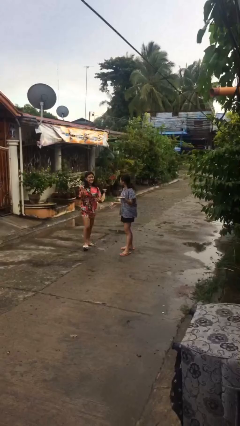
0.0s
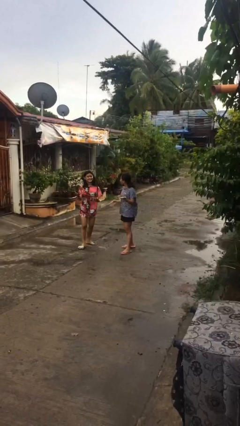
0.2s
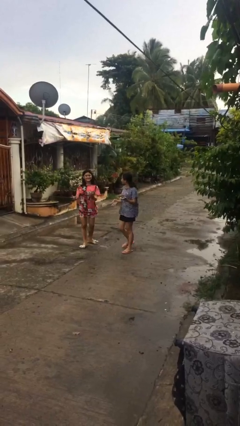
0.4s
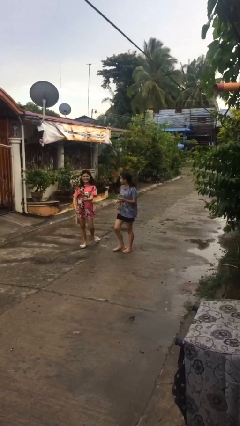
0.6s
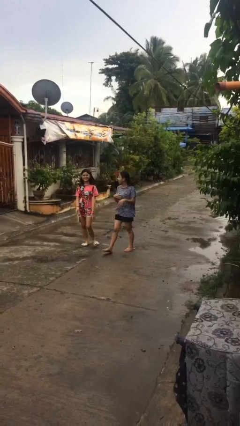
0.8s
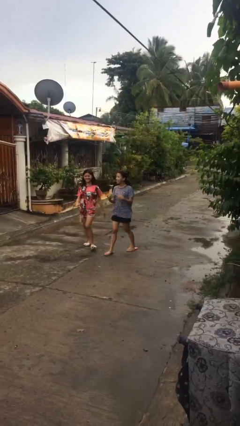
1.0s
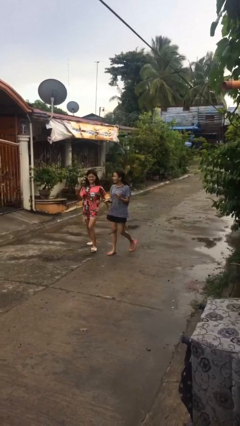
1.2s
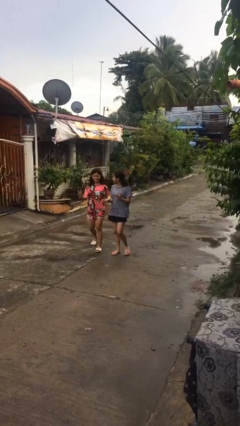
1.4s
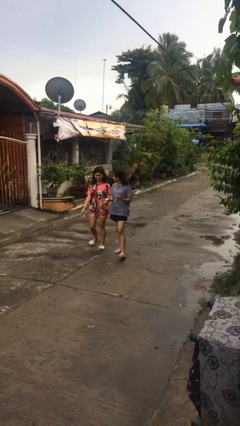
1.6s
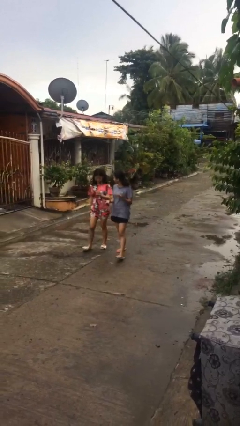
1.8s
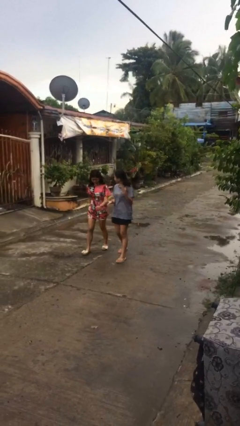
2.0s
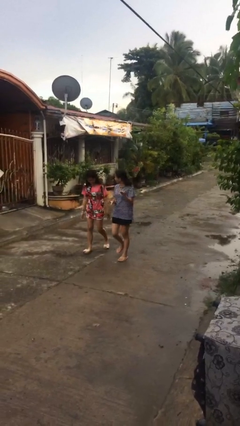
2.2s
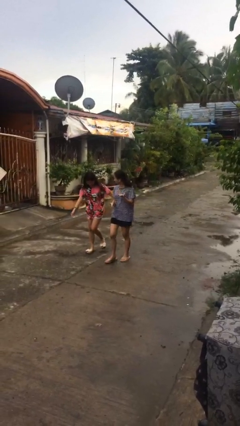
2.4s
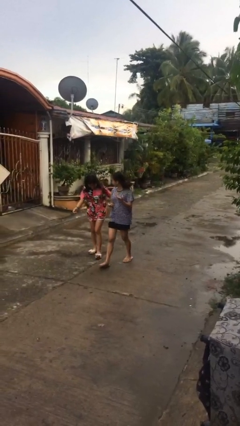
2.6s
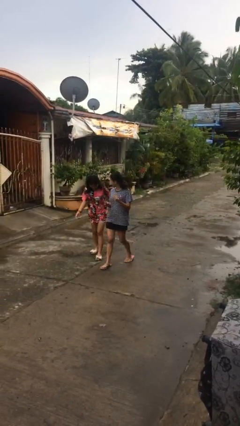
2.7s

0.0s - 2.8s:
person talks to person

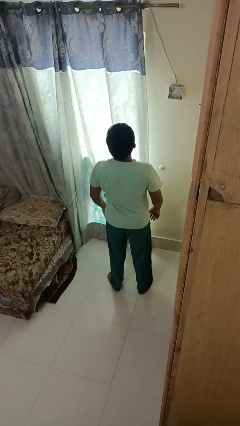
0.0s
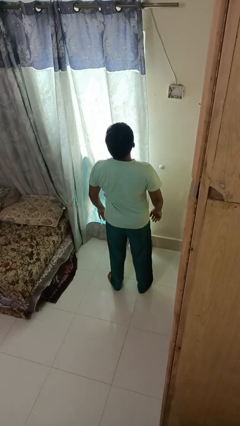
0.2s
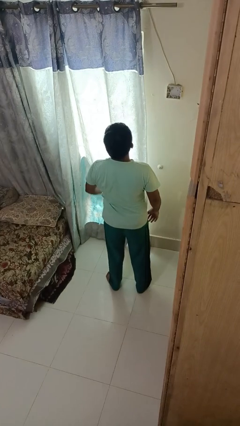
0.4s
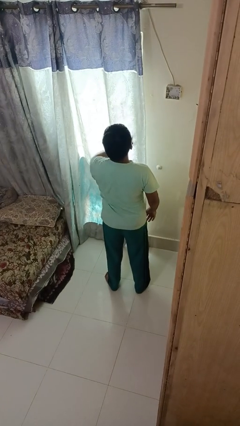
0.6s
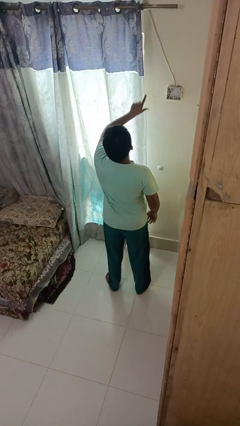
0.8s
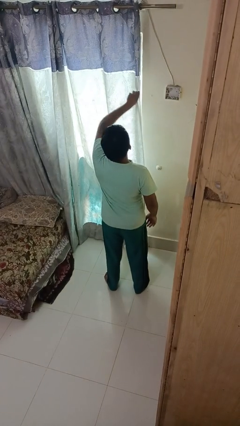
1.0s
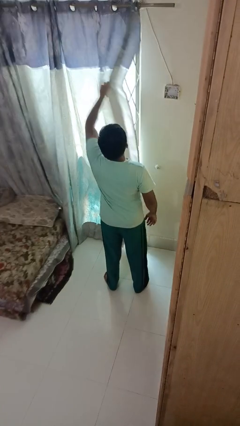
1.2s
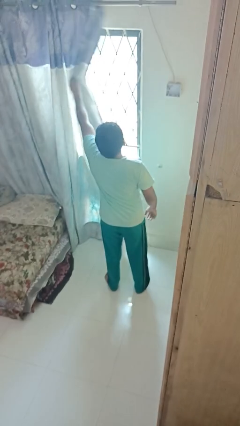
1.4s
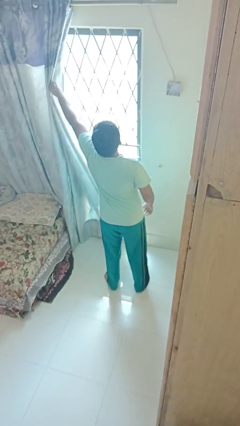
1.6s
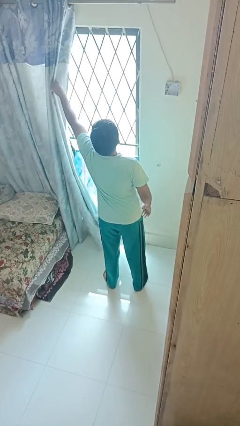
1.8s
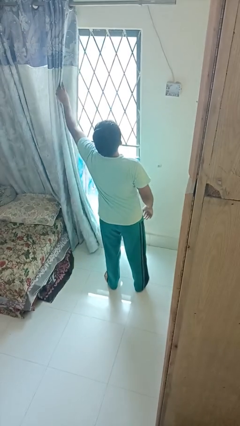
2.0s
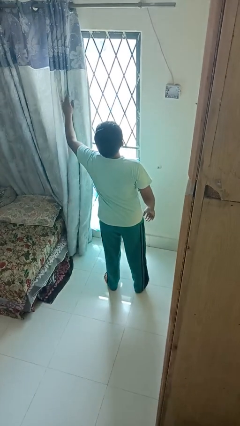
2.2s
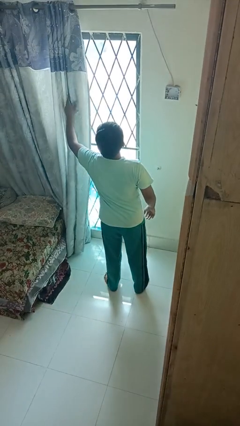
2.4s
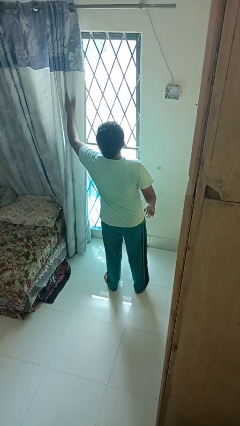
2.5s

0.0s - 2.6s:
person opens curtains

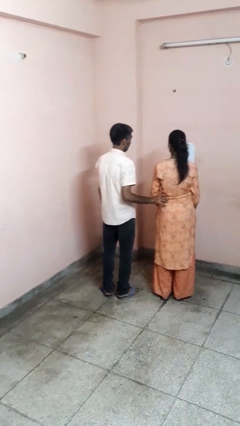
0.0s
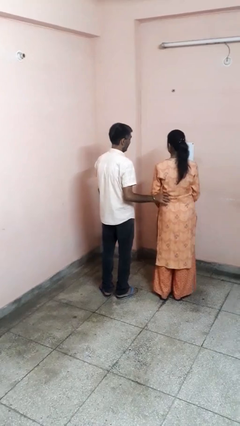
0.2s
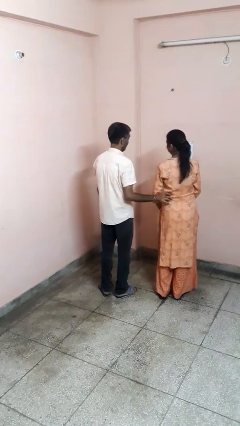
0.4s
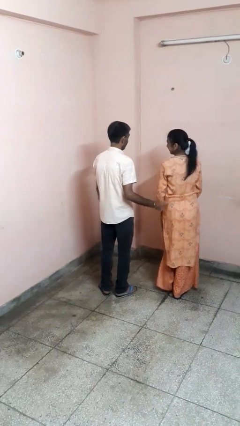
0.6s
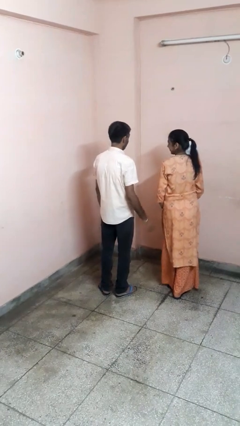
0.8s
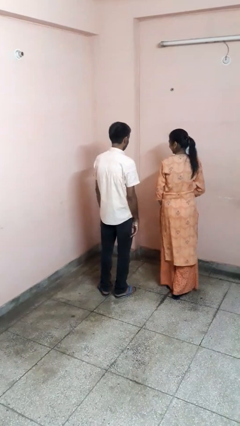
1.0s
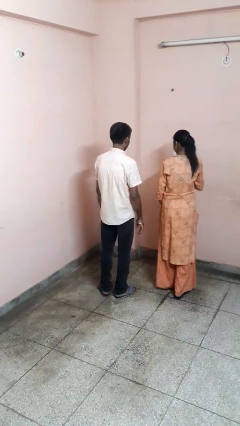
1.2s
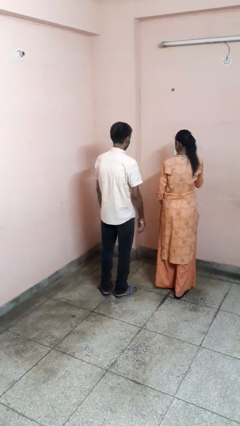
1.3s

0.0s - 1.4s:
person tickles person

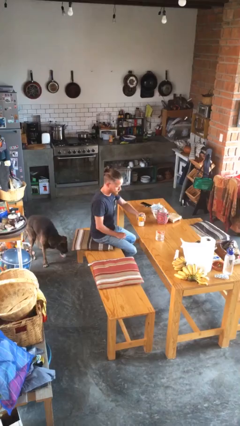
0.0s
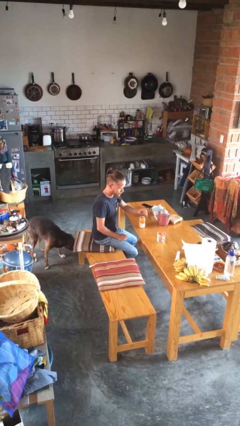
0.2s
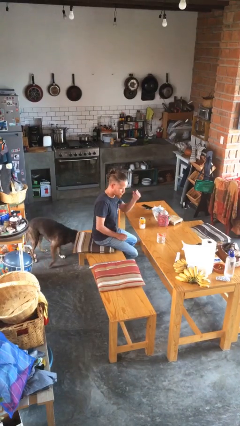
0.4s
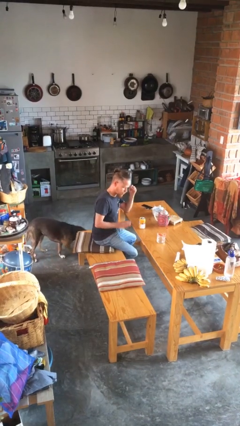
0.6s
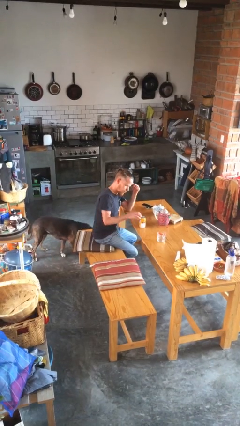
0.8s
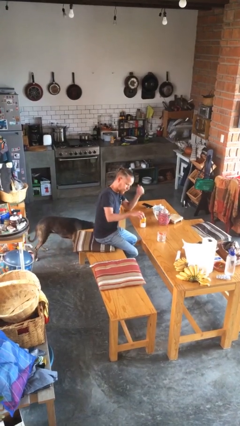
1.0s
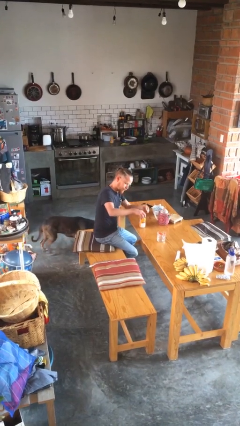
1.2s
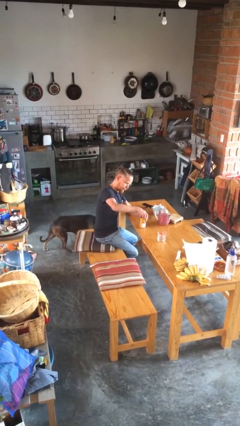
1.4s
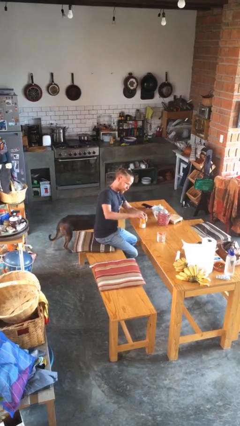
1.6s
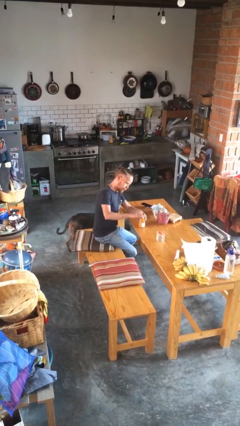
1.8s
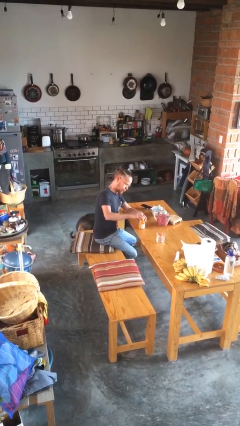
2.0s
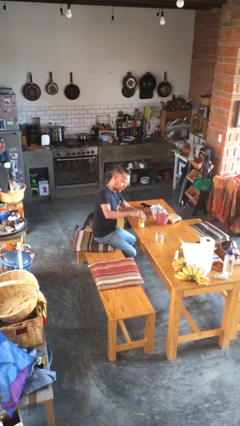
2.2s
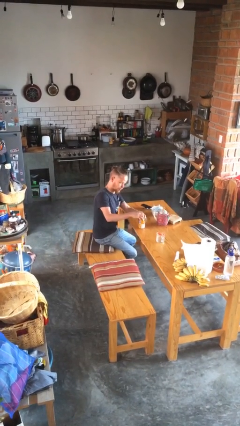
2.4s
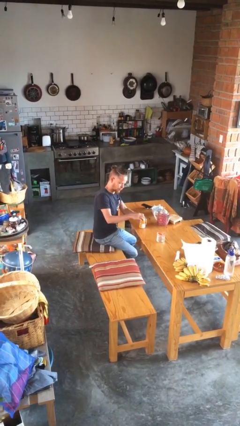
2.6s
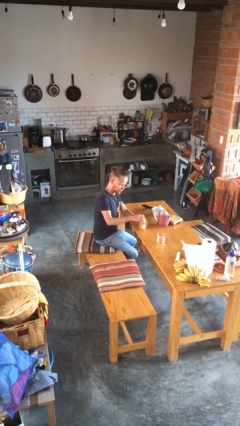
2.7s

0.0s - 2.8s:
person opens beverage can

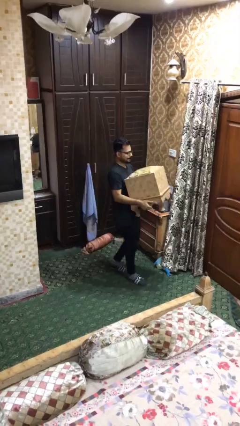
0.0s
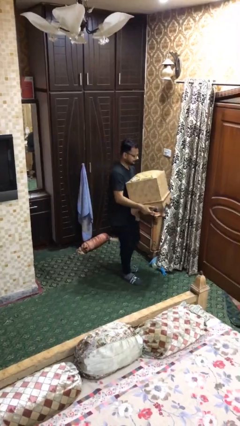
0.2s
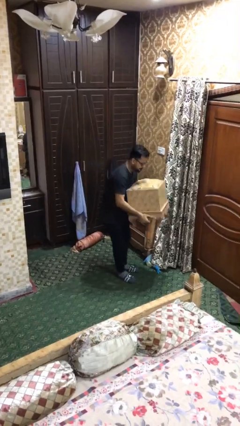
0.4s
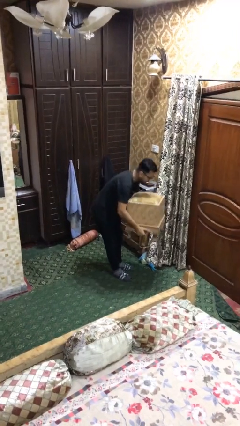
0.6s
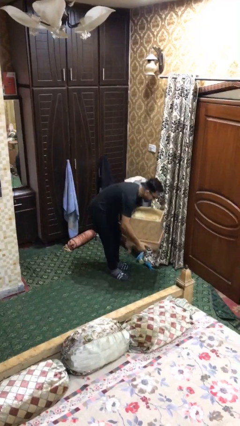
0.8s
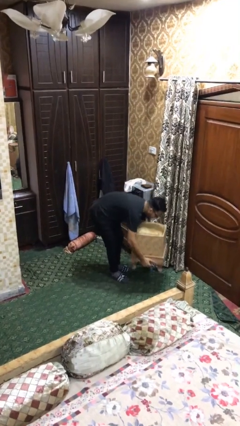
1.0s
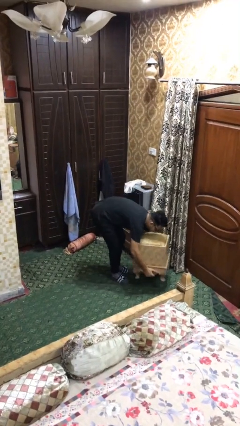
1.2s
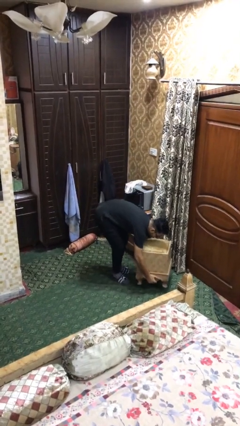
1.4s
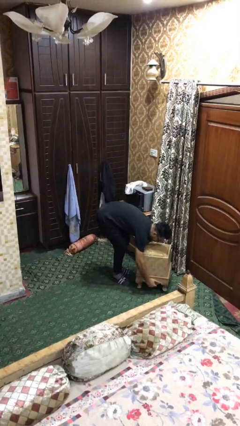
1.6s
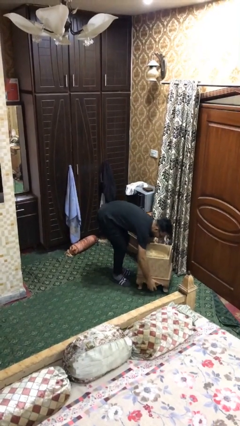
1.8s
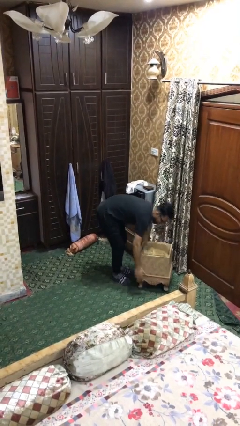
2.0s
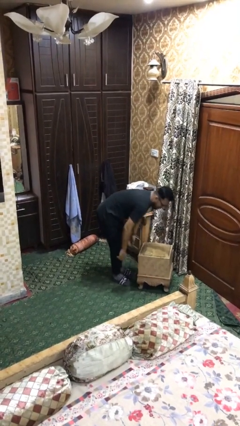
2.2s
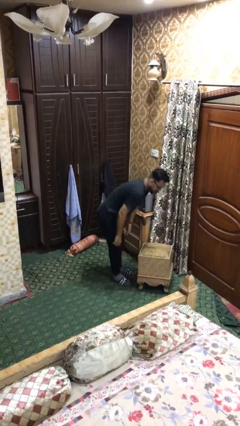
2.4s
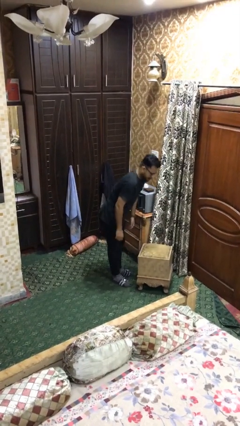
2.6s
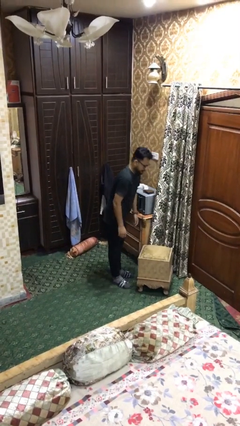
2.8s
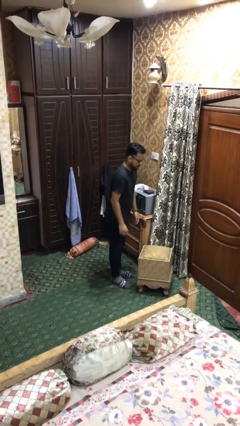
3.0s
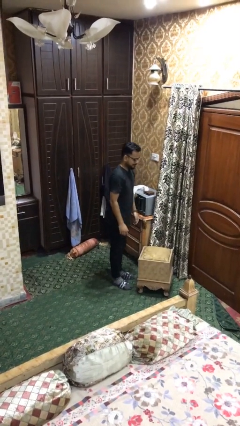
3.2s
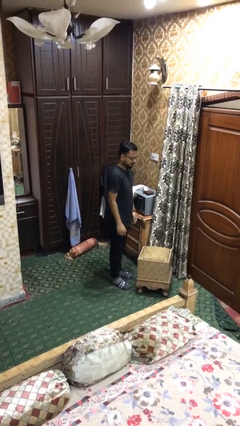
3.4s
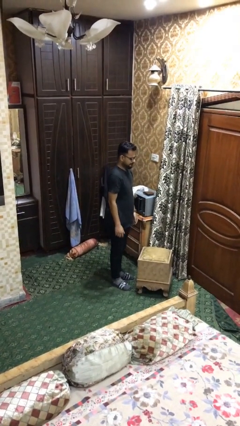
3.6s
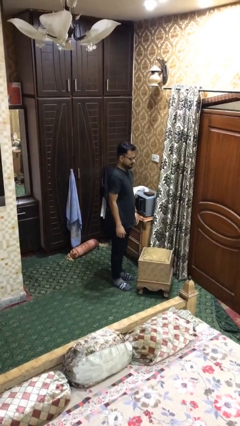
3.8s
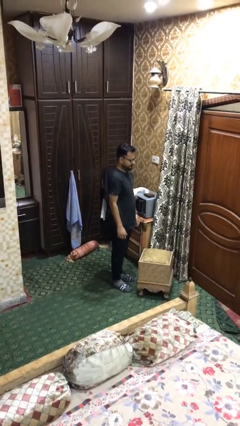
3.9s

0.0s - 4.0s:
person puts down object on floor

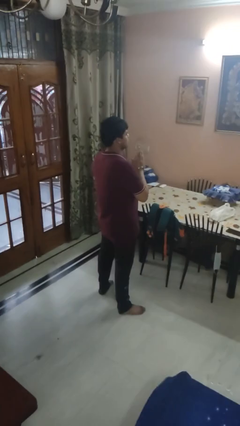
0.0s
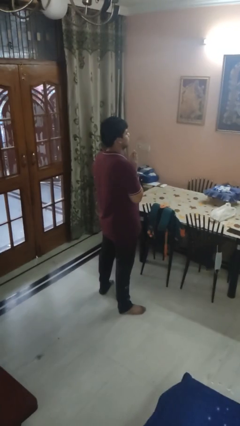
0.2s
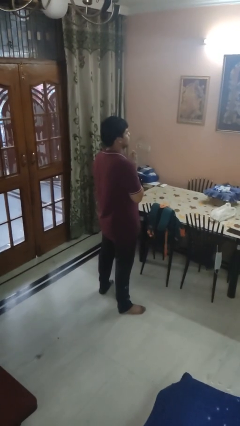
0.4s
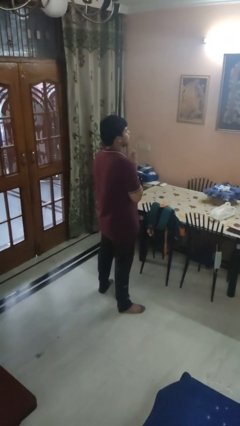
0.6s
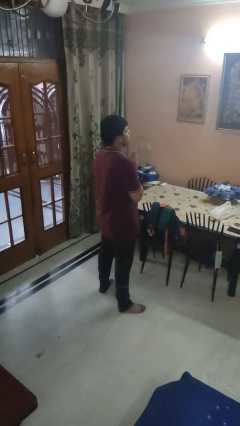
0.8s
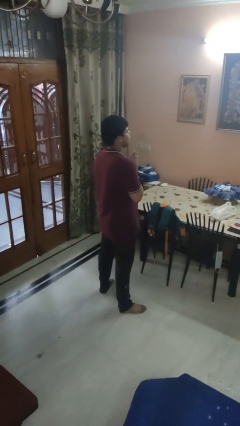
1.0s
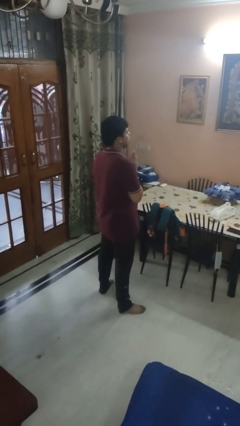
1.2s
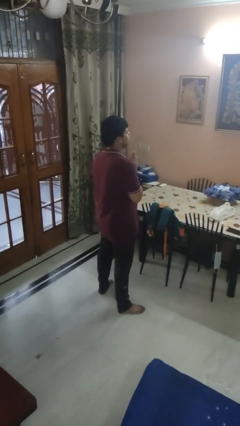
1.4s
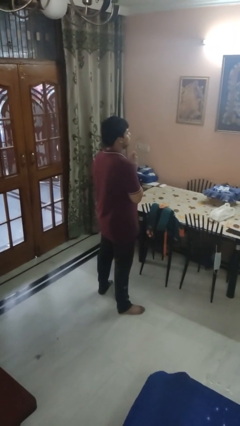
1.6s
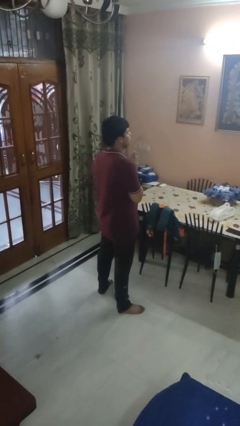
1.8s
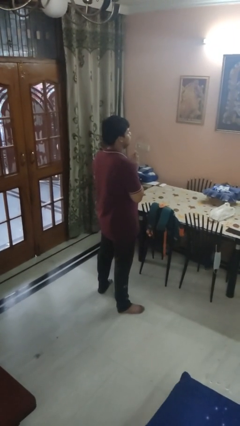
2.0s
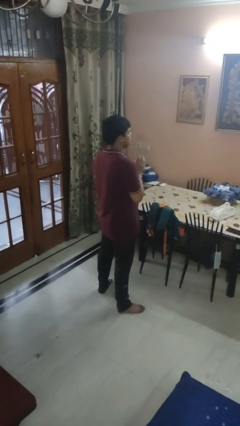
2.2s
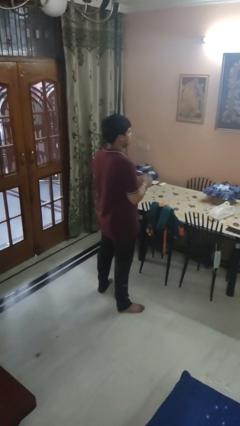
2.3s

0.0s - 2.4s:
person prays

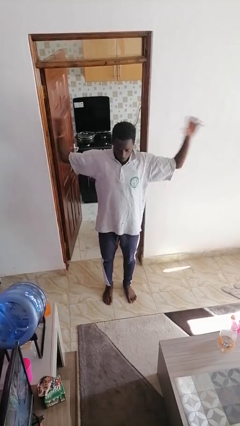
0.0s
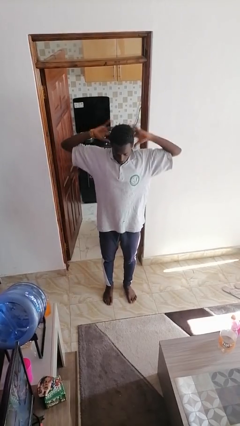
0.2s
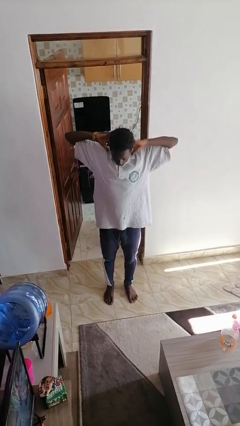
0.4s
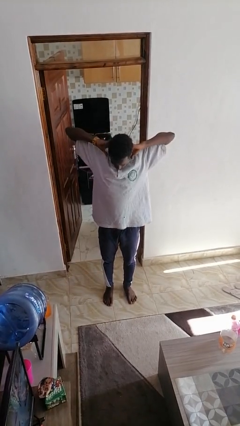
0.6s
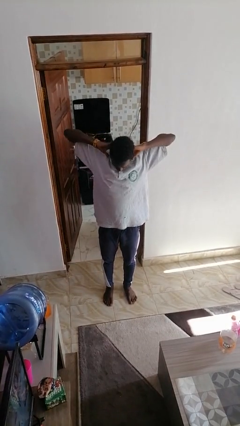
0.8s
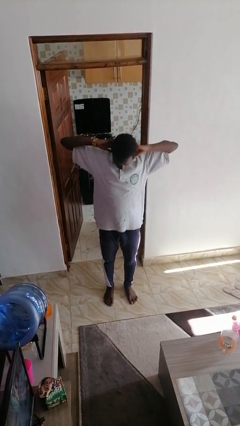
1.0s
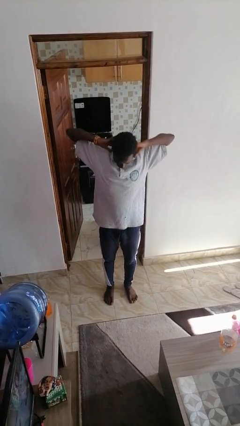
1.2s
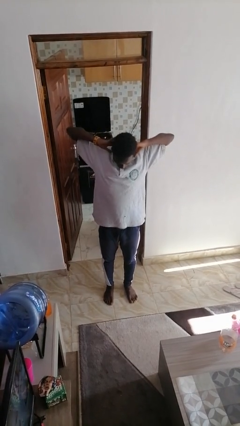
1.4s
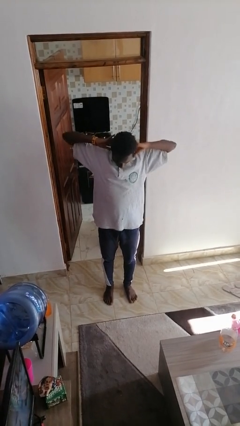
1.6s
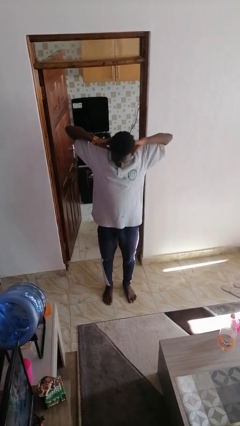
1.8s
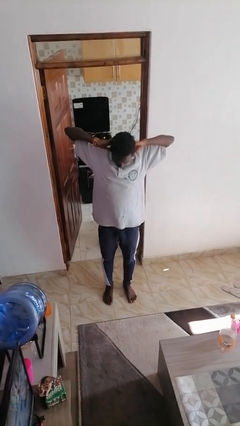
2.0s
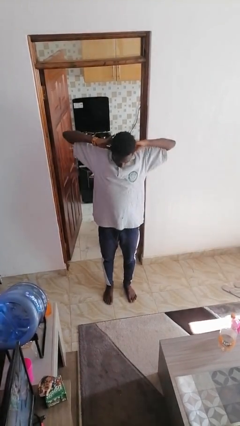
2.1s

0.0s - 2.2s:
person stretches arms over head
